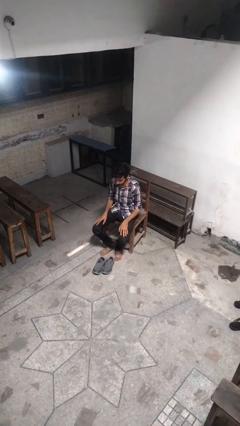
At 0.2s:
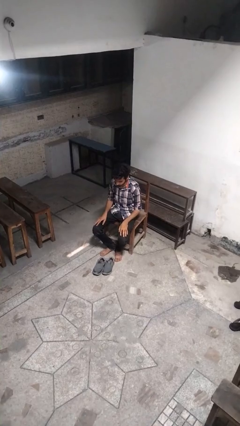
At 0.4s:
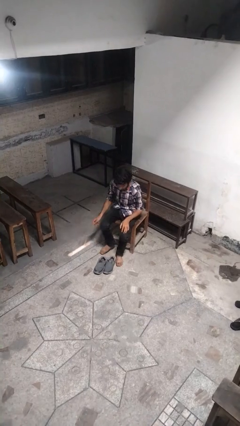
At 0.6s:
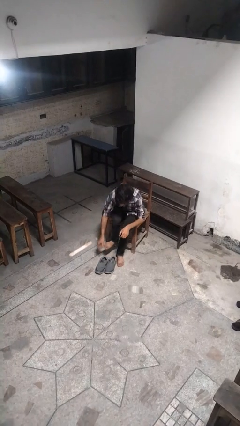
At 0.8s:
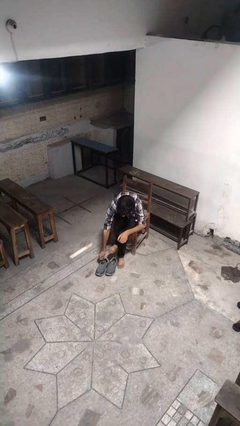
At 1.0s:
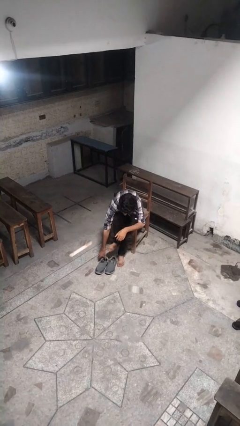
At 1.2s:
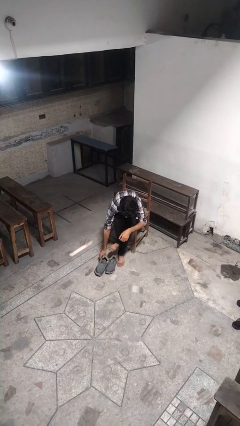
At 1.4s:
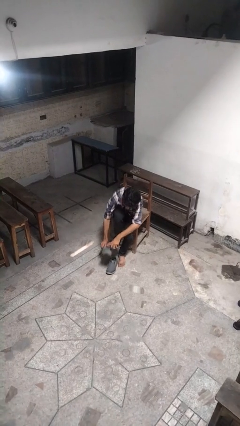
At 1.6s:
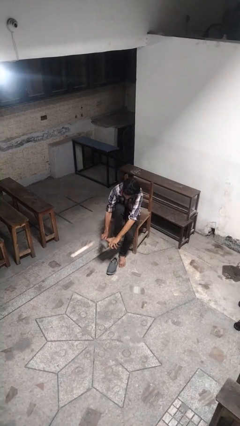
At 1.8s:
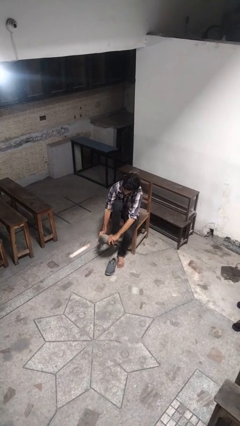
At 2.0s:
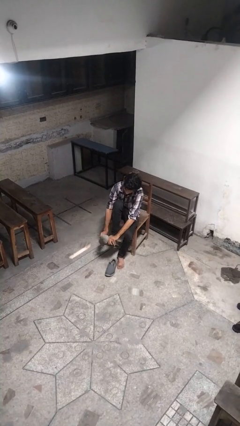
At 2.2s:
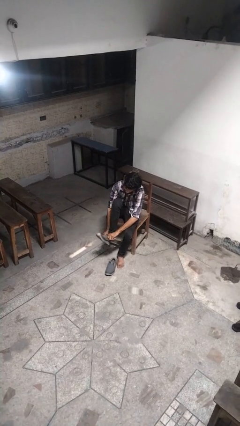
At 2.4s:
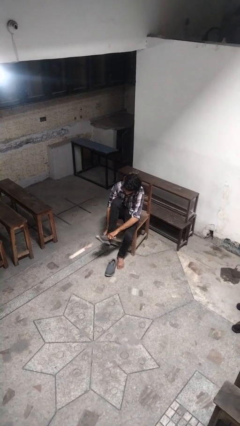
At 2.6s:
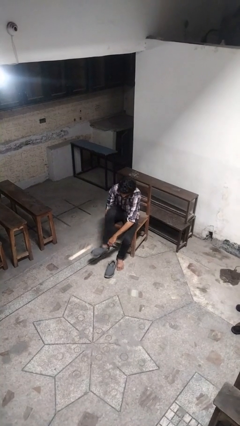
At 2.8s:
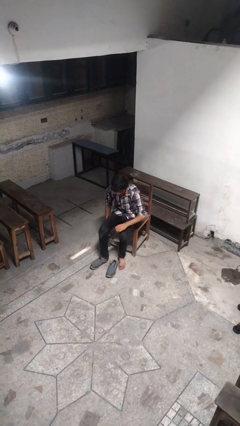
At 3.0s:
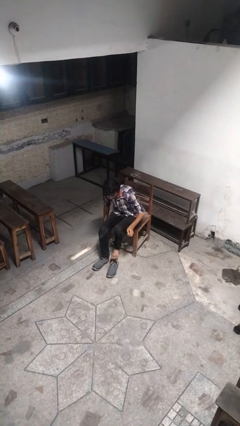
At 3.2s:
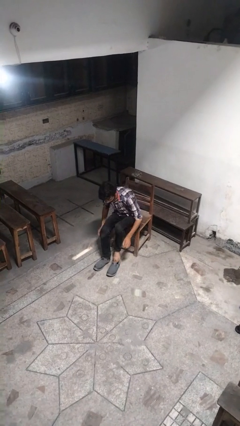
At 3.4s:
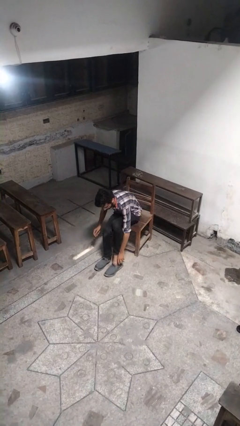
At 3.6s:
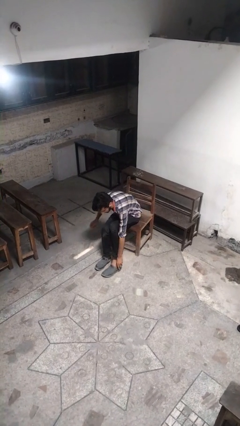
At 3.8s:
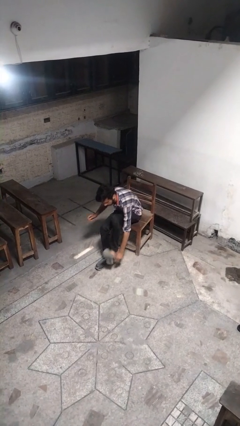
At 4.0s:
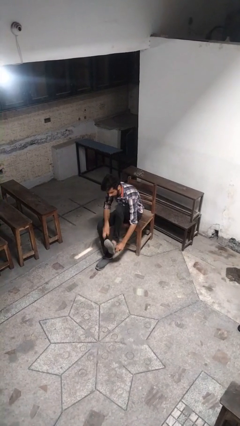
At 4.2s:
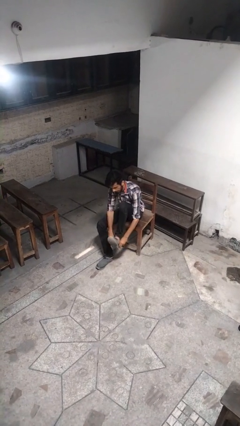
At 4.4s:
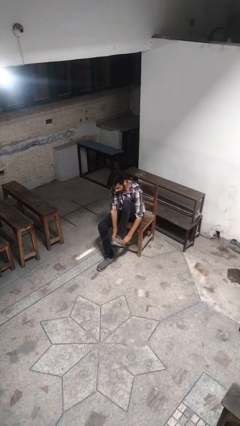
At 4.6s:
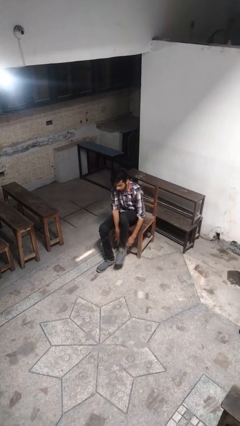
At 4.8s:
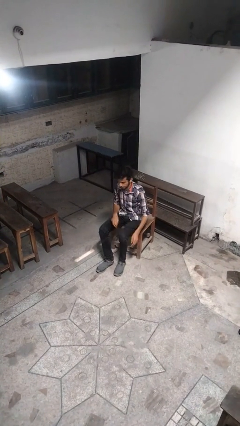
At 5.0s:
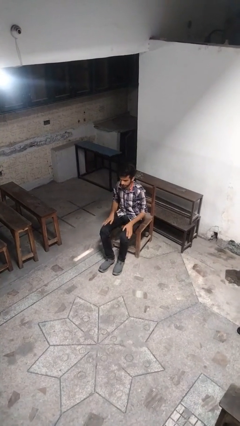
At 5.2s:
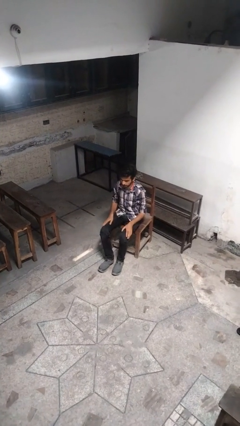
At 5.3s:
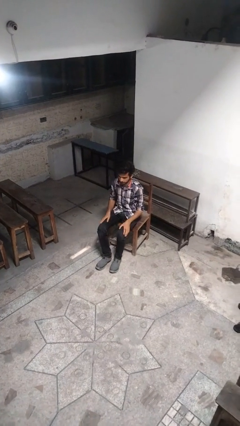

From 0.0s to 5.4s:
person puts on shoes

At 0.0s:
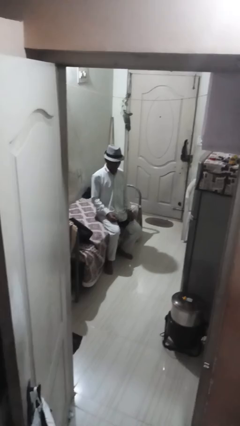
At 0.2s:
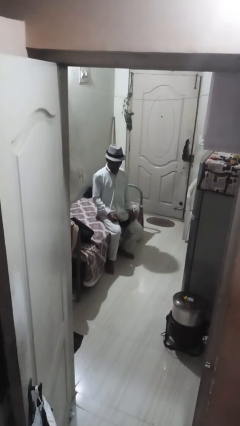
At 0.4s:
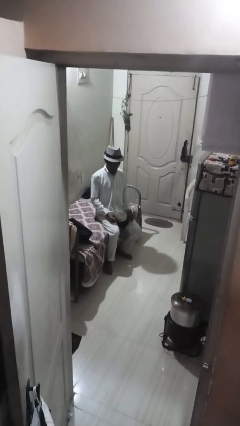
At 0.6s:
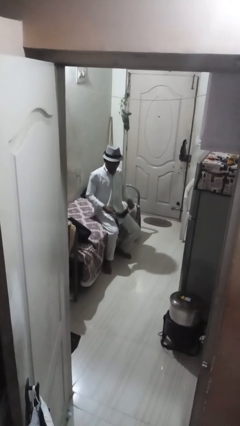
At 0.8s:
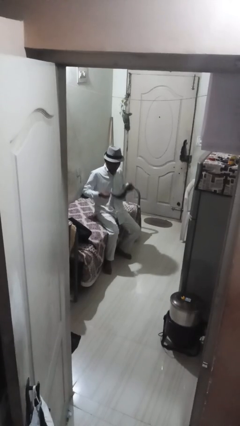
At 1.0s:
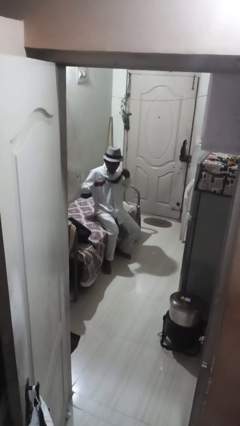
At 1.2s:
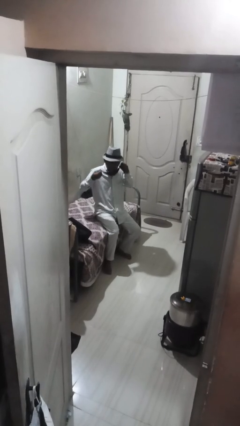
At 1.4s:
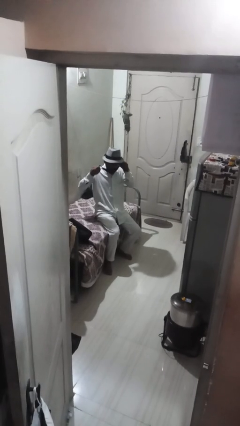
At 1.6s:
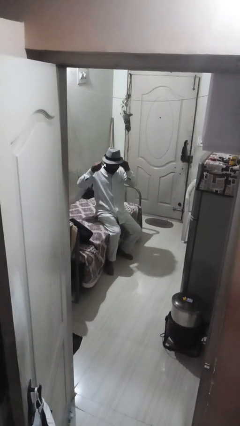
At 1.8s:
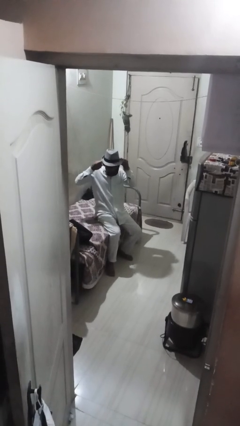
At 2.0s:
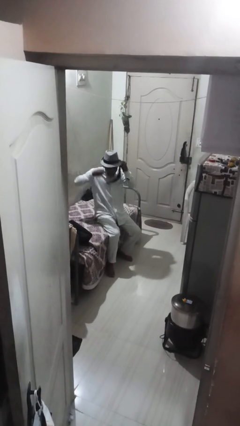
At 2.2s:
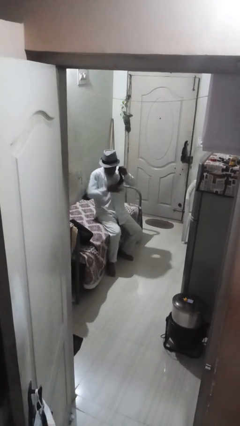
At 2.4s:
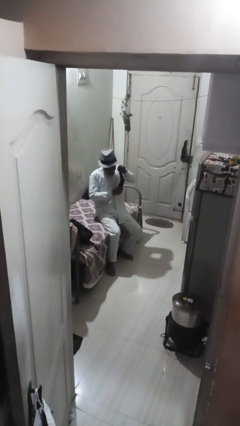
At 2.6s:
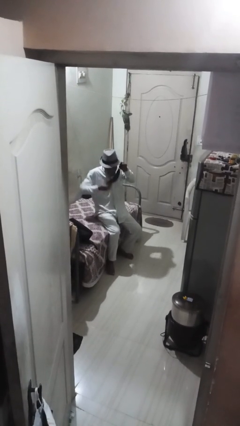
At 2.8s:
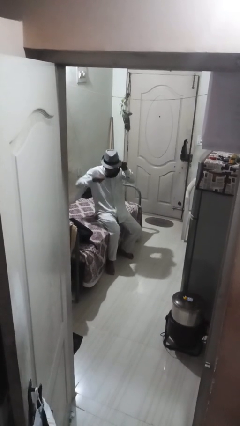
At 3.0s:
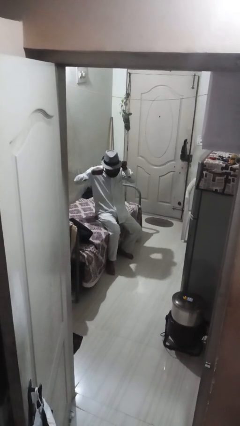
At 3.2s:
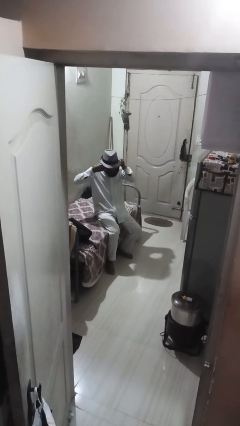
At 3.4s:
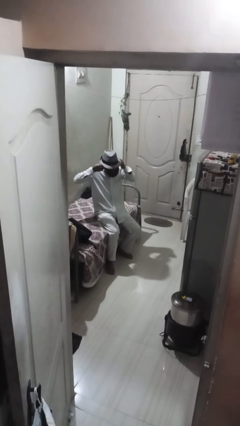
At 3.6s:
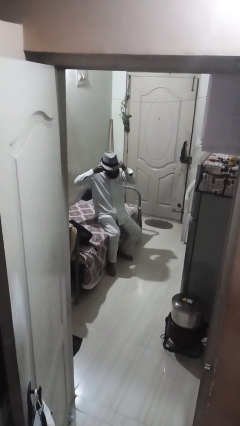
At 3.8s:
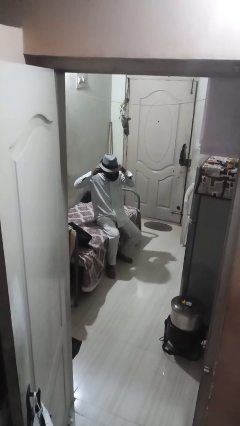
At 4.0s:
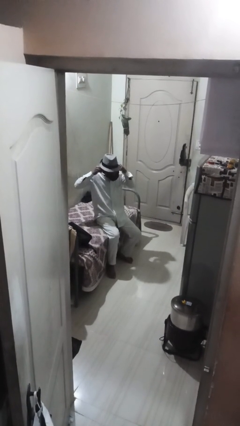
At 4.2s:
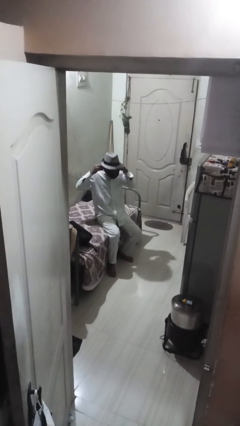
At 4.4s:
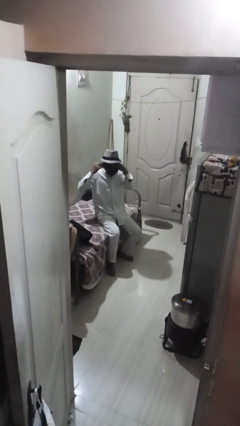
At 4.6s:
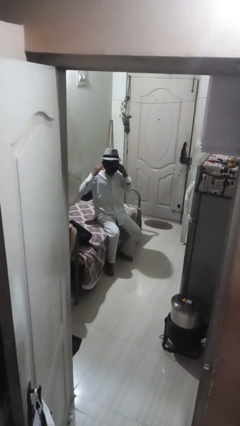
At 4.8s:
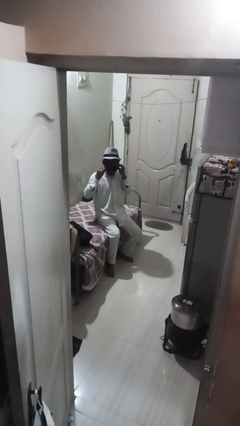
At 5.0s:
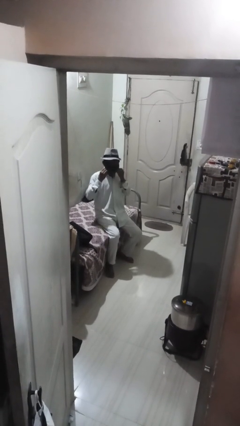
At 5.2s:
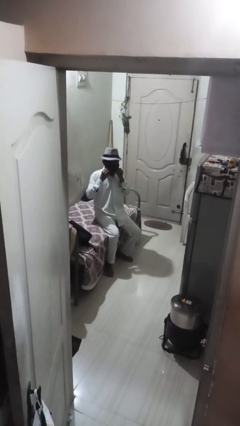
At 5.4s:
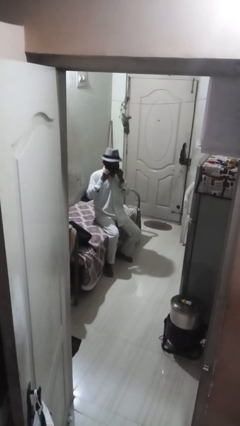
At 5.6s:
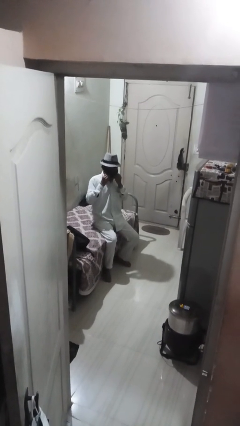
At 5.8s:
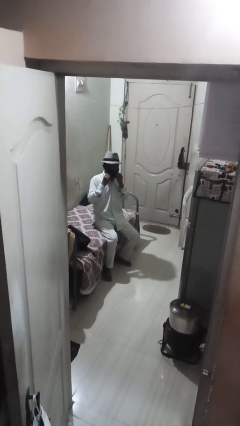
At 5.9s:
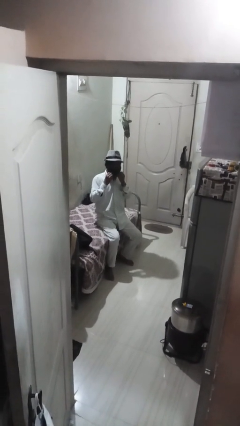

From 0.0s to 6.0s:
person puts on facemask

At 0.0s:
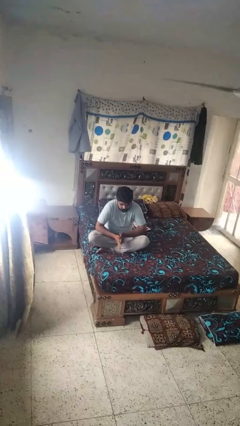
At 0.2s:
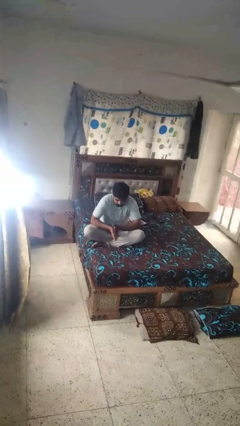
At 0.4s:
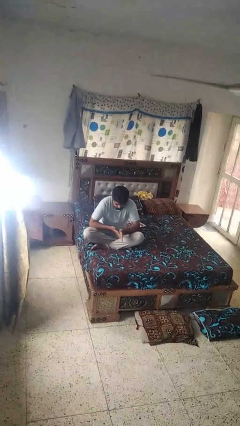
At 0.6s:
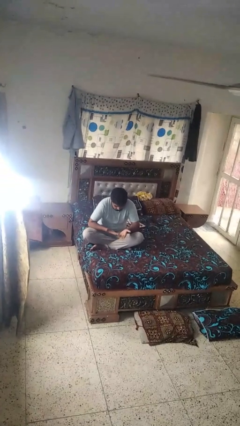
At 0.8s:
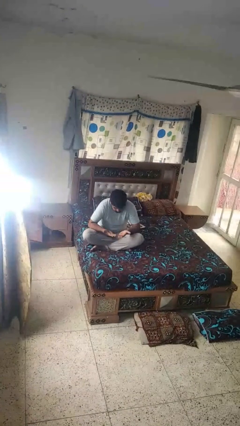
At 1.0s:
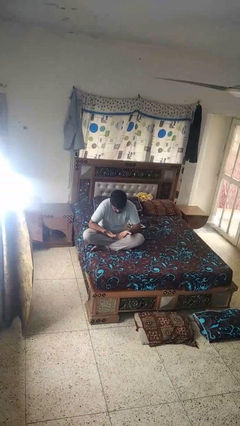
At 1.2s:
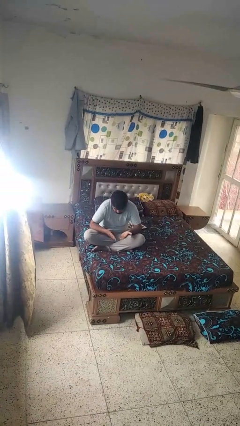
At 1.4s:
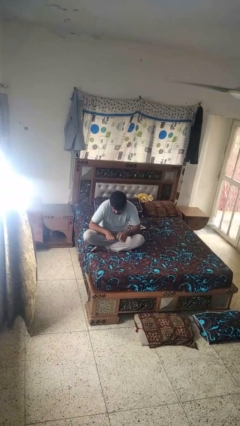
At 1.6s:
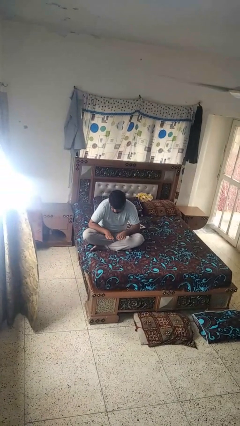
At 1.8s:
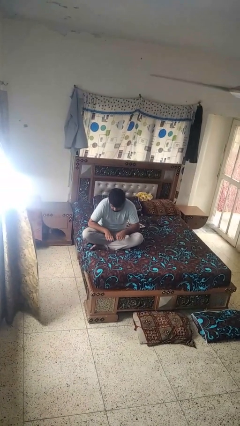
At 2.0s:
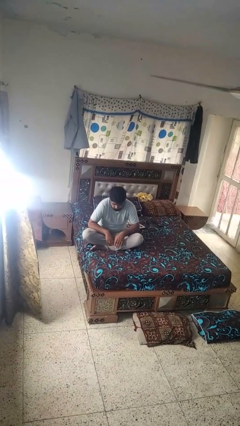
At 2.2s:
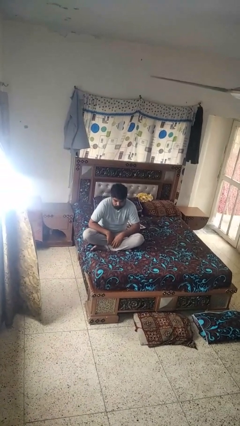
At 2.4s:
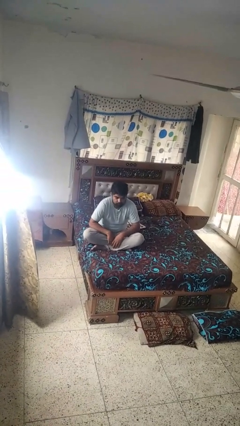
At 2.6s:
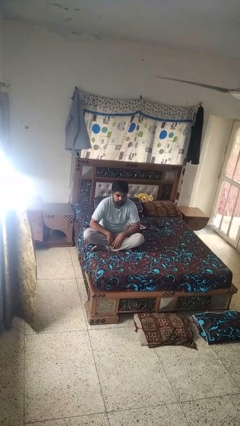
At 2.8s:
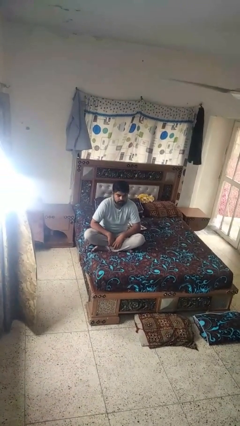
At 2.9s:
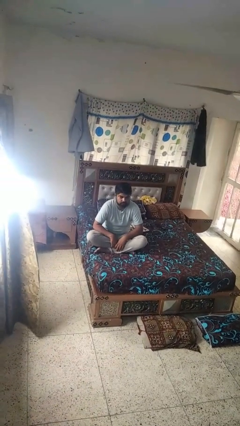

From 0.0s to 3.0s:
person looks at hands in lap

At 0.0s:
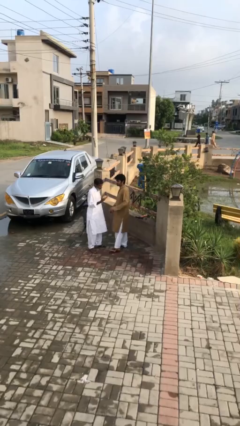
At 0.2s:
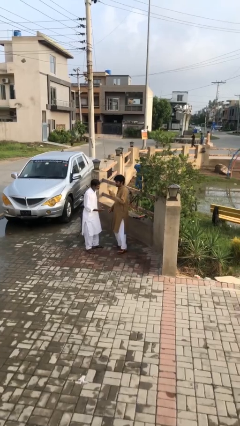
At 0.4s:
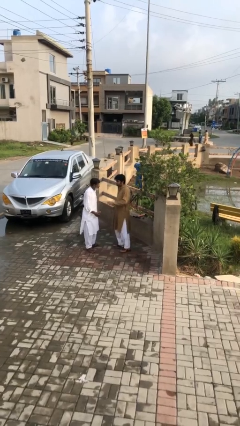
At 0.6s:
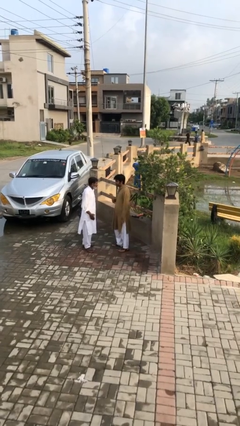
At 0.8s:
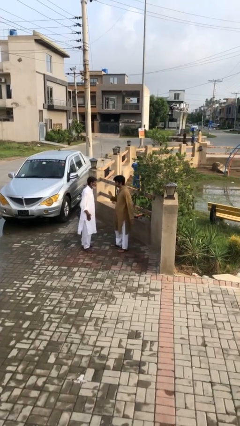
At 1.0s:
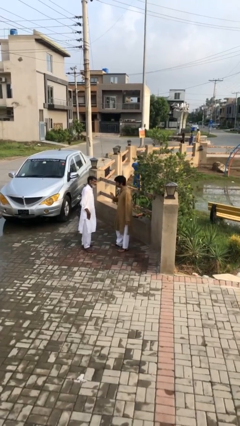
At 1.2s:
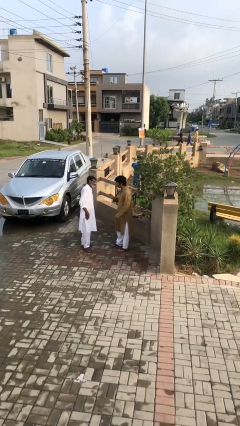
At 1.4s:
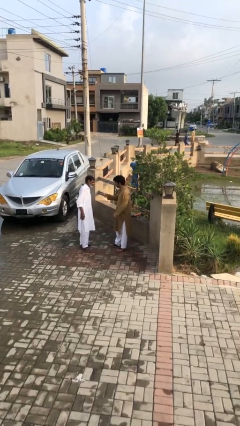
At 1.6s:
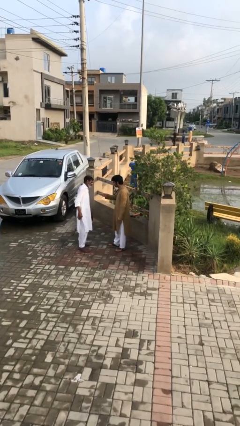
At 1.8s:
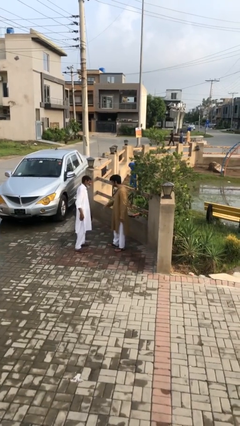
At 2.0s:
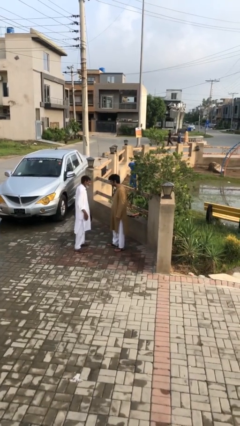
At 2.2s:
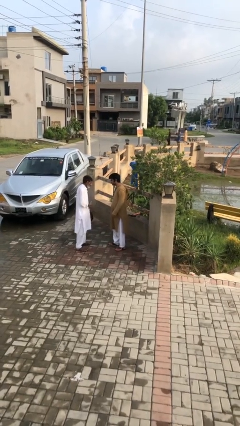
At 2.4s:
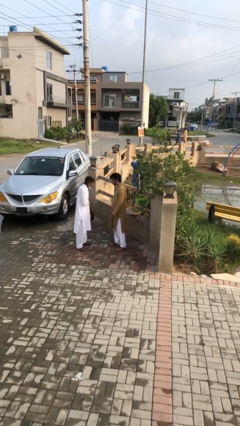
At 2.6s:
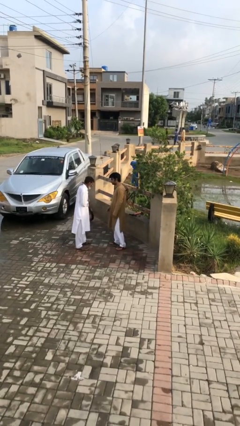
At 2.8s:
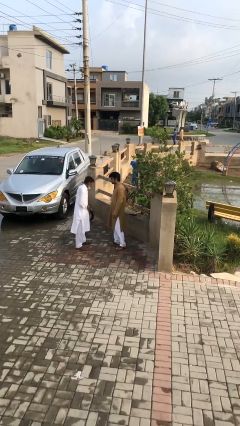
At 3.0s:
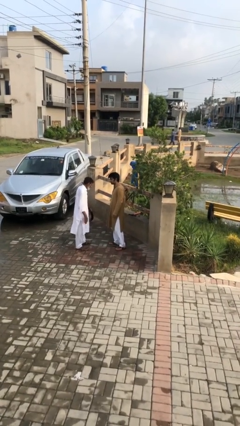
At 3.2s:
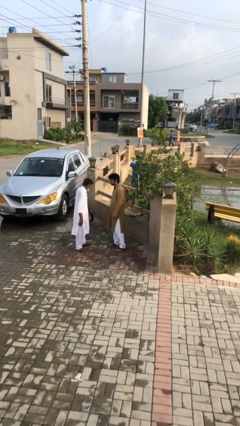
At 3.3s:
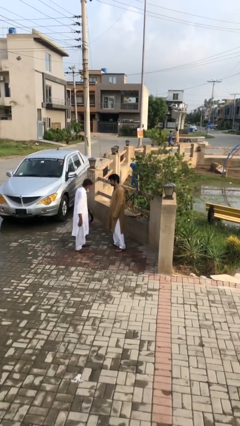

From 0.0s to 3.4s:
person talks to person

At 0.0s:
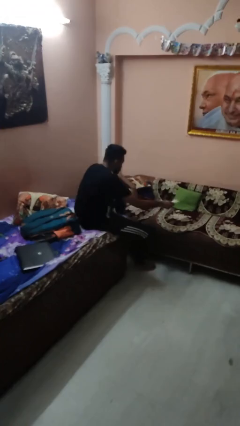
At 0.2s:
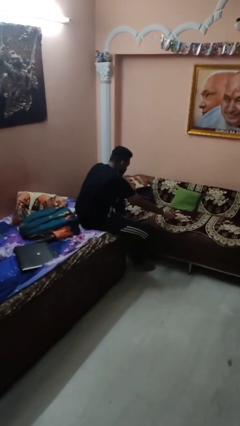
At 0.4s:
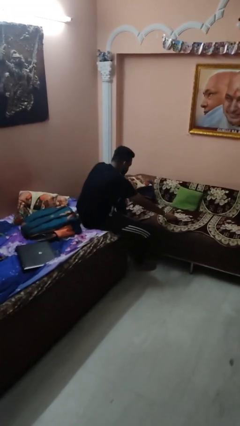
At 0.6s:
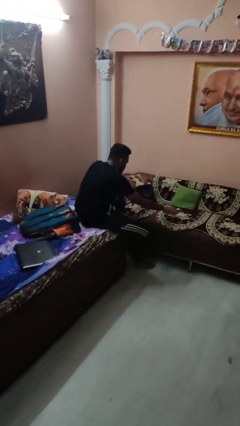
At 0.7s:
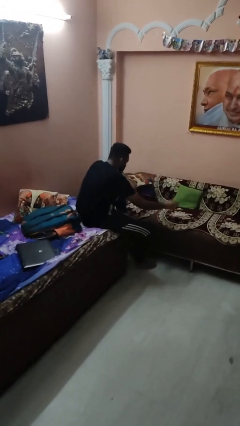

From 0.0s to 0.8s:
person puts down object on couch
